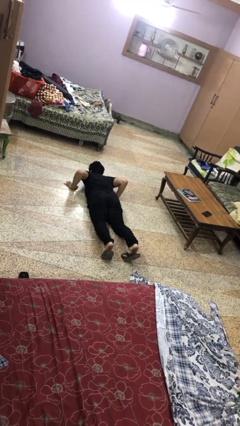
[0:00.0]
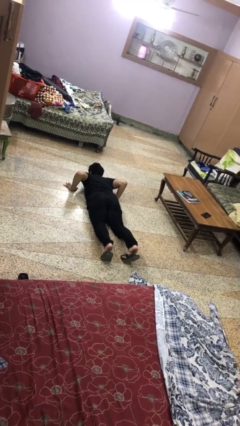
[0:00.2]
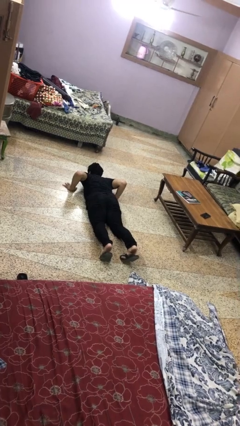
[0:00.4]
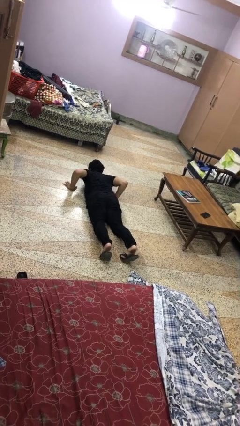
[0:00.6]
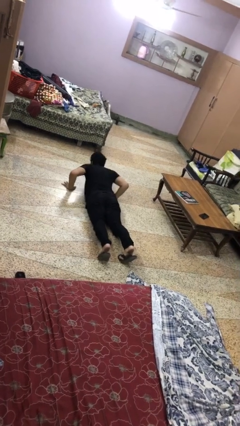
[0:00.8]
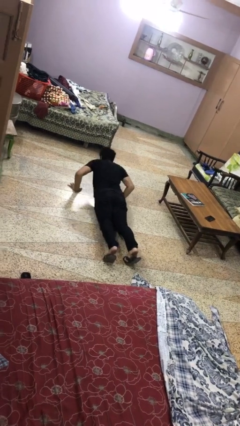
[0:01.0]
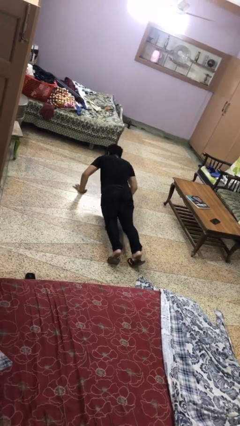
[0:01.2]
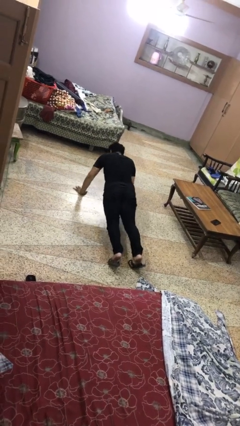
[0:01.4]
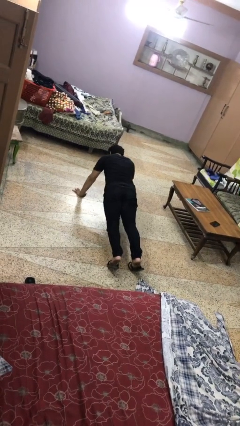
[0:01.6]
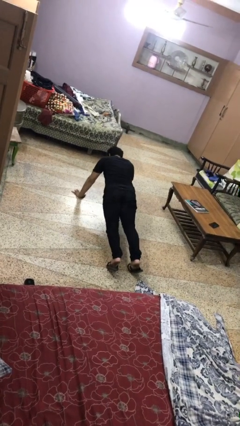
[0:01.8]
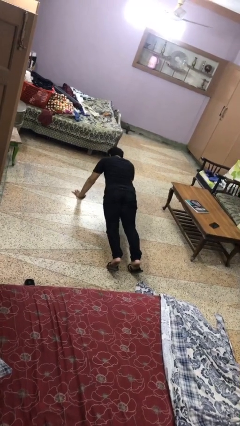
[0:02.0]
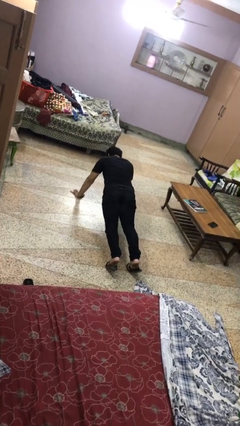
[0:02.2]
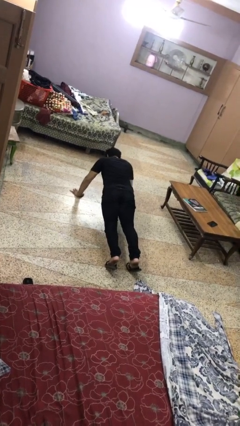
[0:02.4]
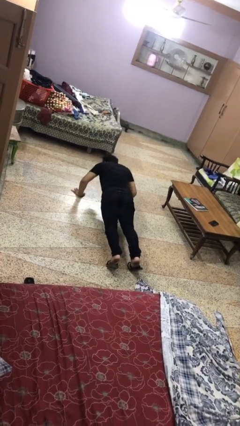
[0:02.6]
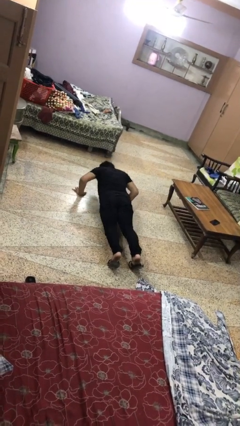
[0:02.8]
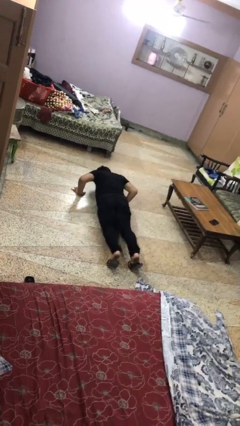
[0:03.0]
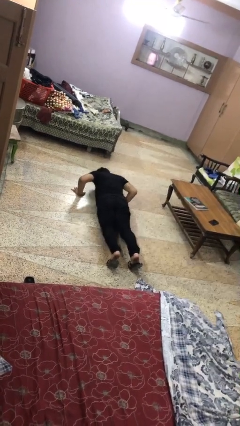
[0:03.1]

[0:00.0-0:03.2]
person exercises with pushup

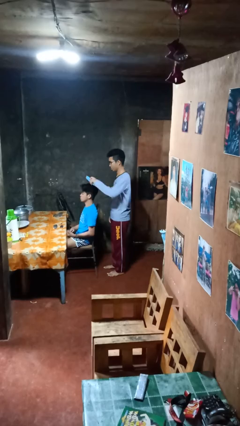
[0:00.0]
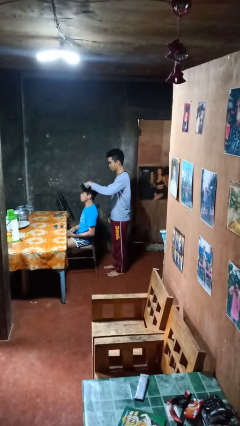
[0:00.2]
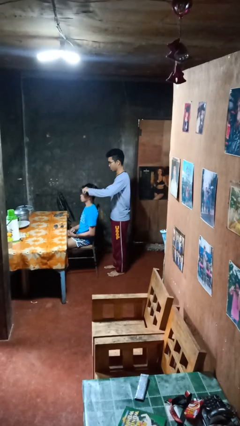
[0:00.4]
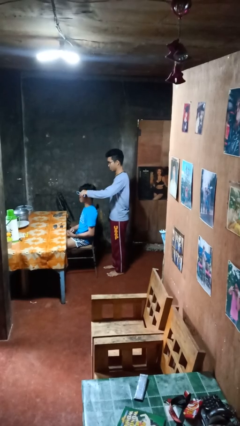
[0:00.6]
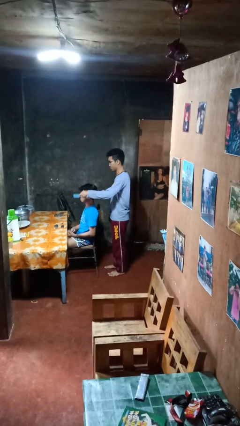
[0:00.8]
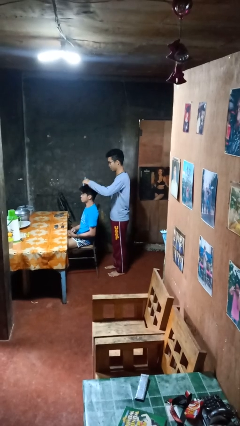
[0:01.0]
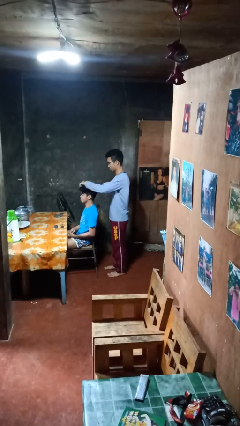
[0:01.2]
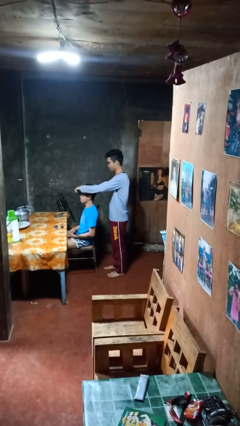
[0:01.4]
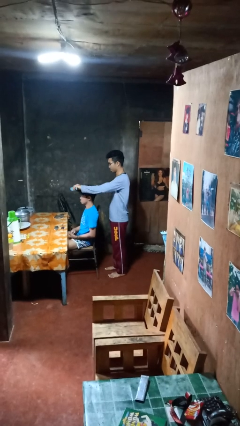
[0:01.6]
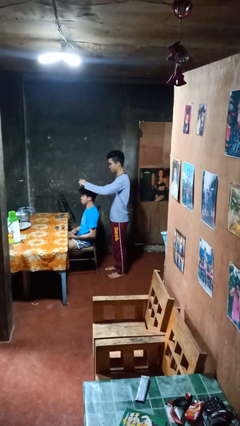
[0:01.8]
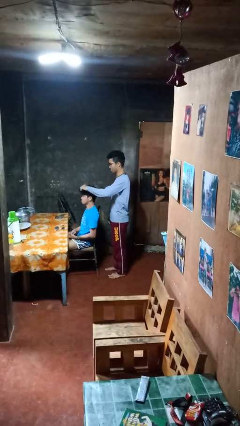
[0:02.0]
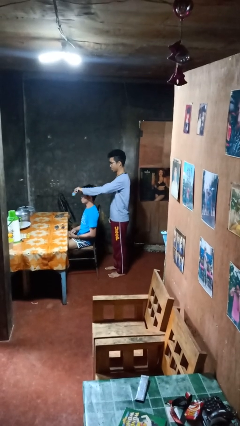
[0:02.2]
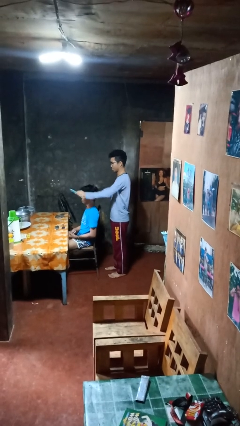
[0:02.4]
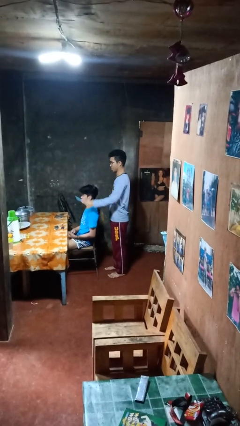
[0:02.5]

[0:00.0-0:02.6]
person brushes hair of person

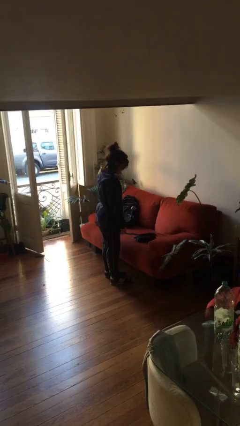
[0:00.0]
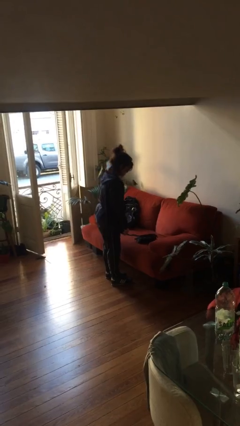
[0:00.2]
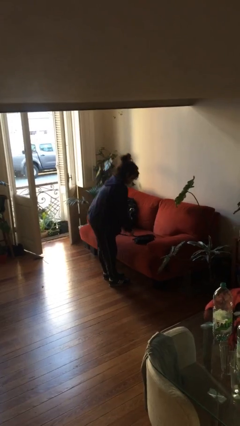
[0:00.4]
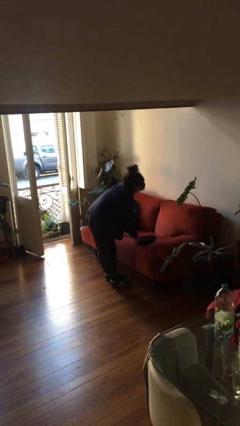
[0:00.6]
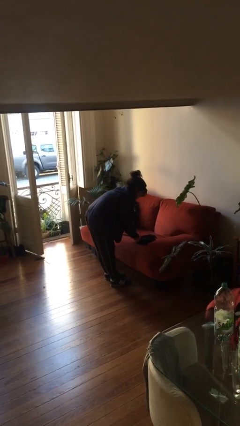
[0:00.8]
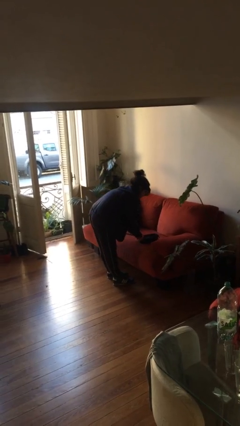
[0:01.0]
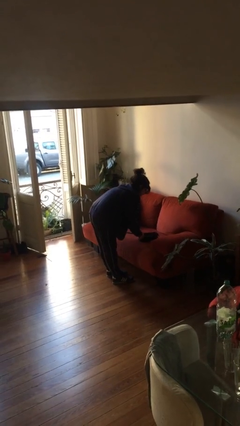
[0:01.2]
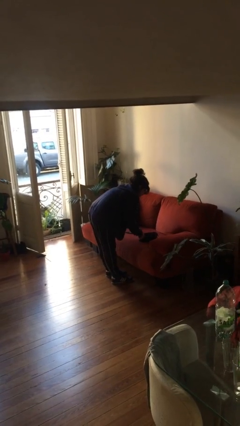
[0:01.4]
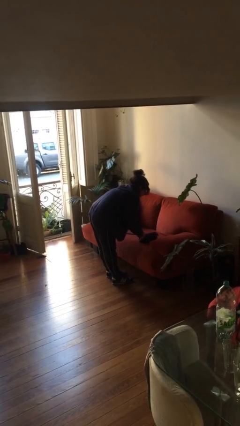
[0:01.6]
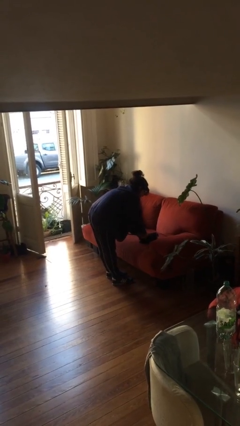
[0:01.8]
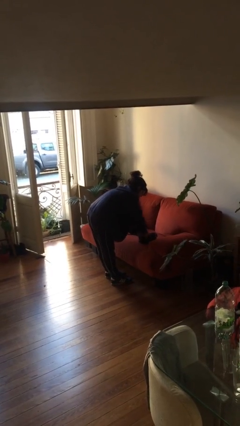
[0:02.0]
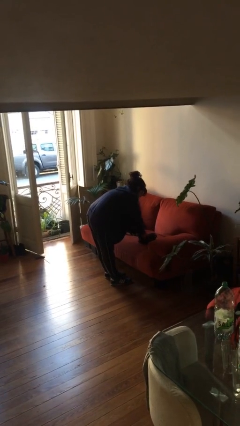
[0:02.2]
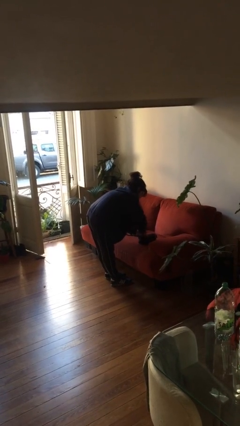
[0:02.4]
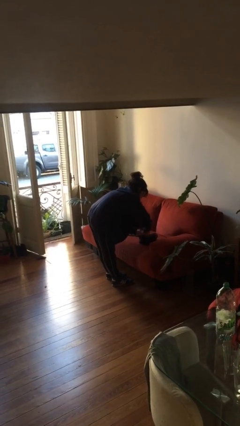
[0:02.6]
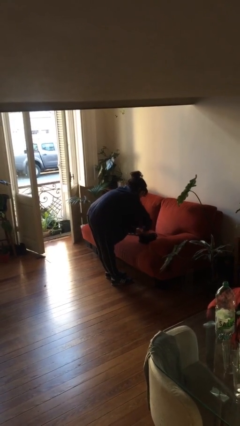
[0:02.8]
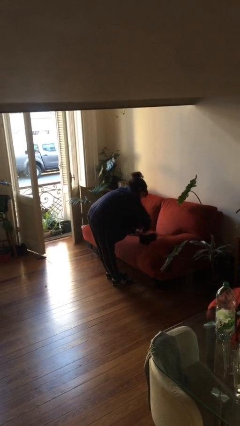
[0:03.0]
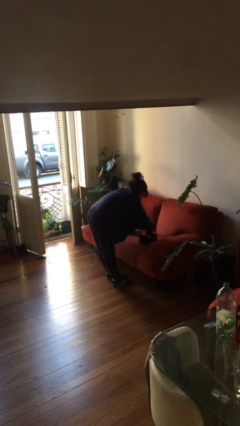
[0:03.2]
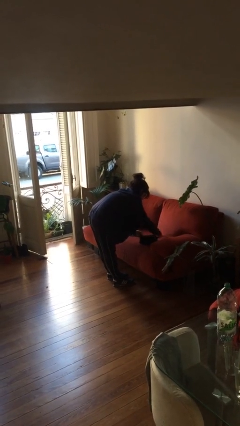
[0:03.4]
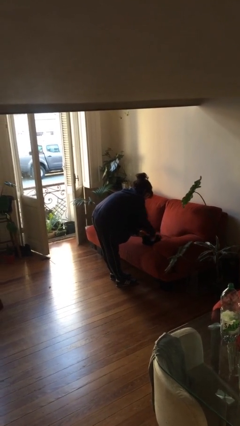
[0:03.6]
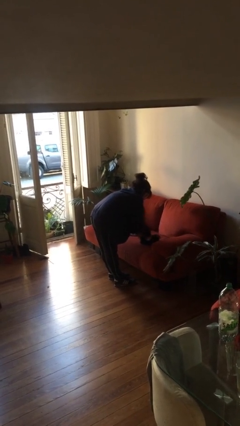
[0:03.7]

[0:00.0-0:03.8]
person searches in purse

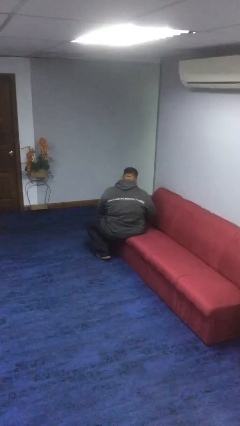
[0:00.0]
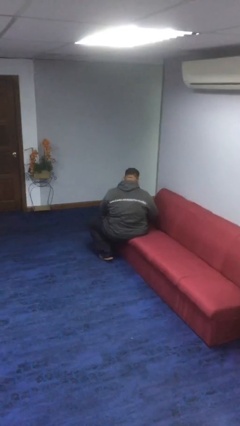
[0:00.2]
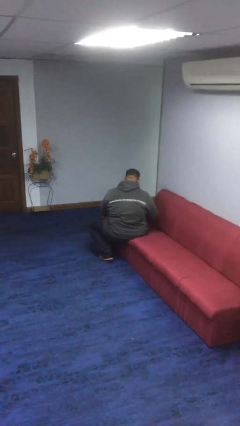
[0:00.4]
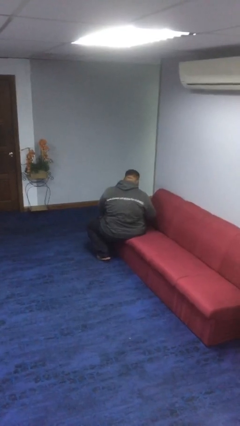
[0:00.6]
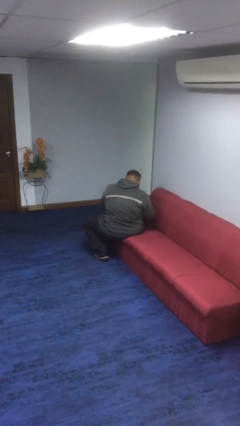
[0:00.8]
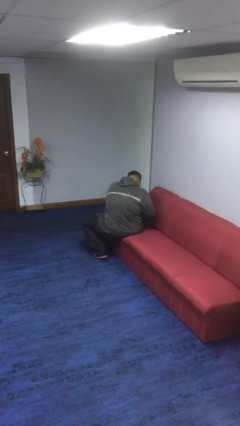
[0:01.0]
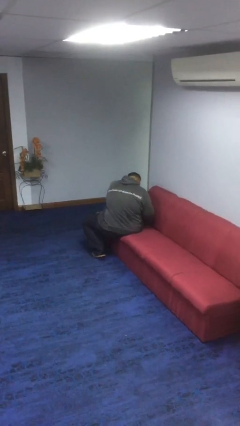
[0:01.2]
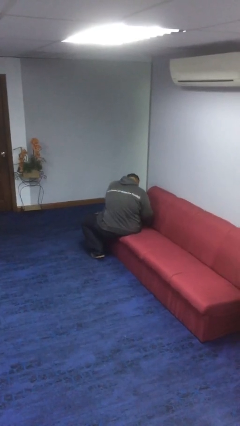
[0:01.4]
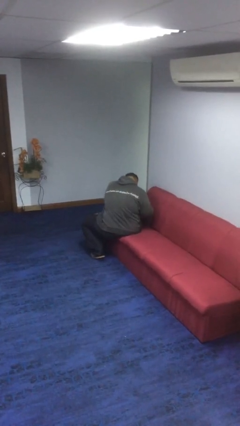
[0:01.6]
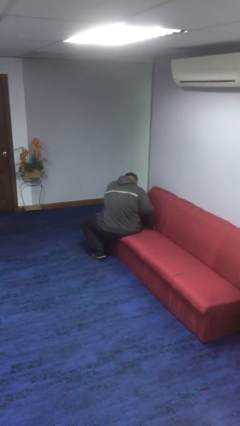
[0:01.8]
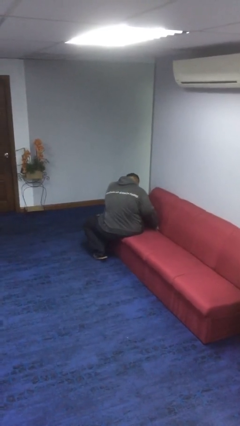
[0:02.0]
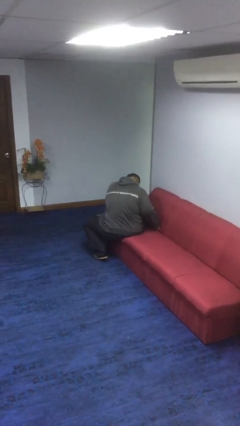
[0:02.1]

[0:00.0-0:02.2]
person searches in couch

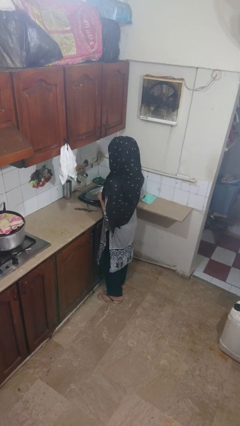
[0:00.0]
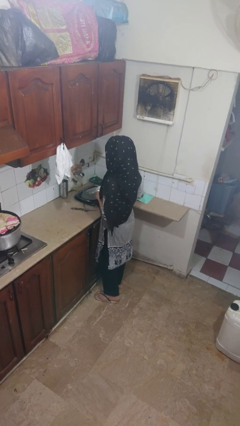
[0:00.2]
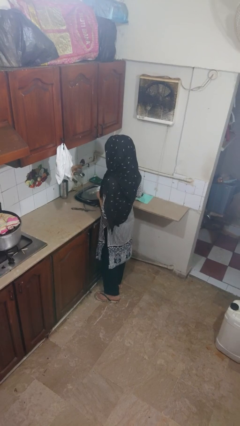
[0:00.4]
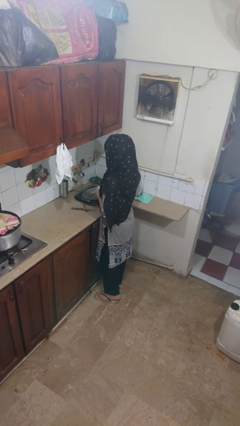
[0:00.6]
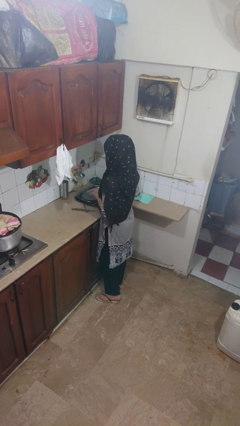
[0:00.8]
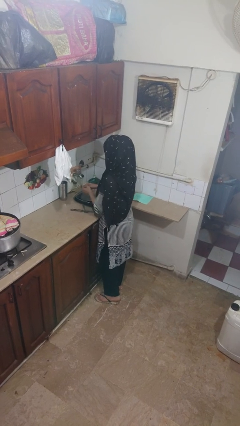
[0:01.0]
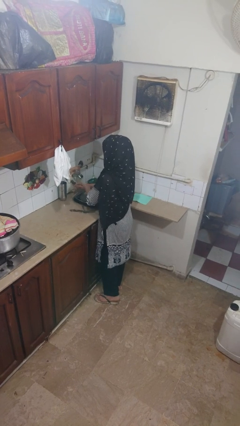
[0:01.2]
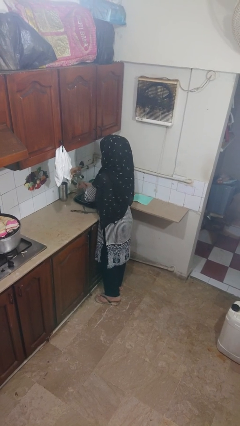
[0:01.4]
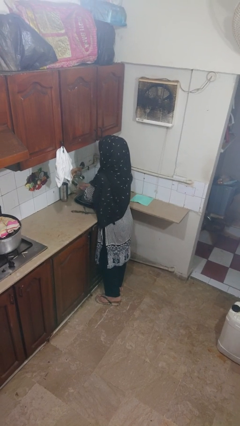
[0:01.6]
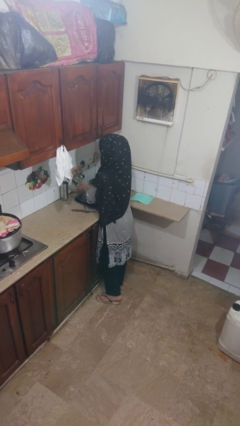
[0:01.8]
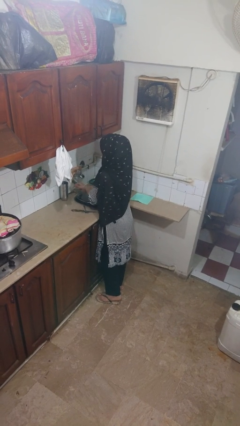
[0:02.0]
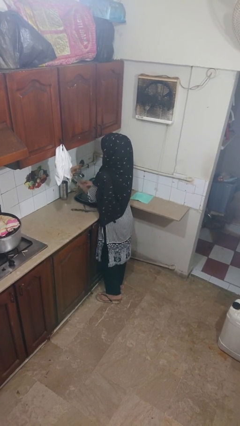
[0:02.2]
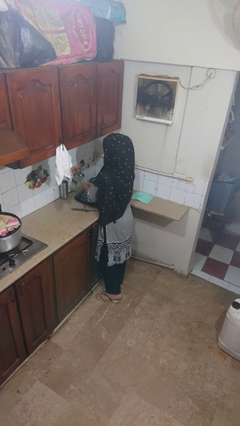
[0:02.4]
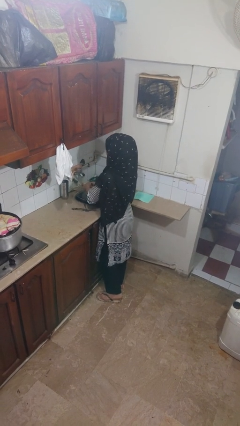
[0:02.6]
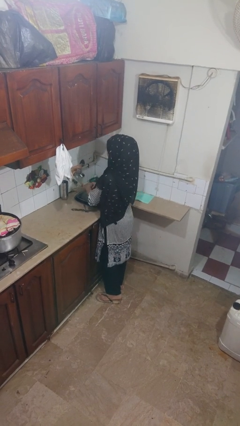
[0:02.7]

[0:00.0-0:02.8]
person washes hands

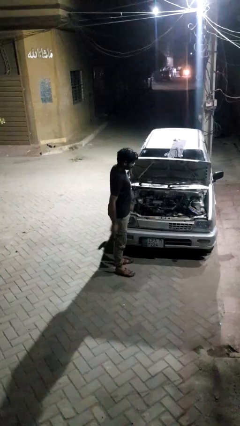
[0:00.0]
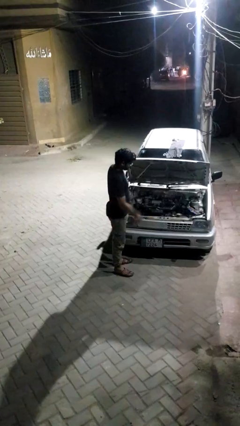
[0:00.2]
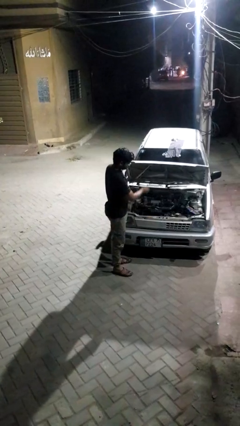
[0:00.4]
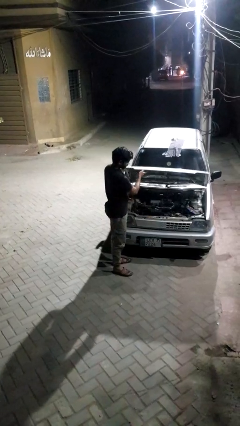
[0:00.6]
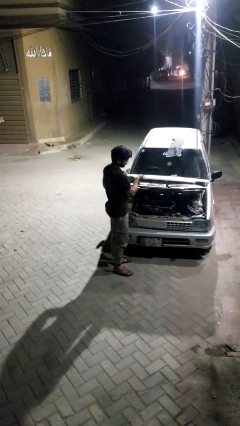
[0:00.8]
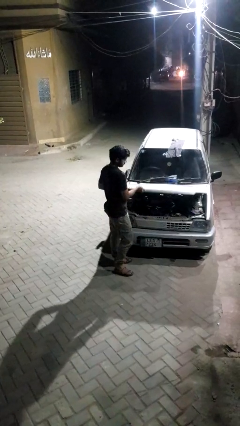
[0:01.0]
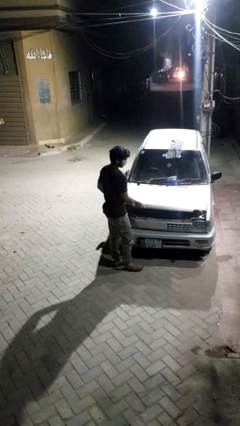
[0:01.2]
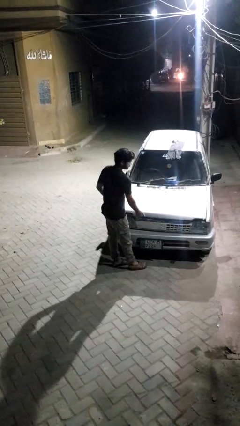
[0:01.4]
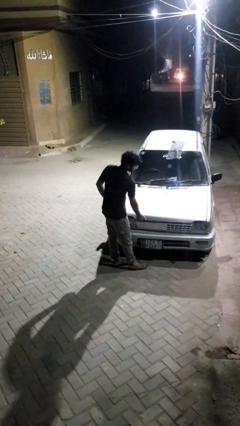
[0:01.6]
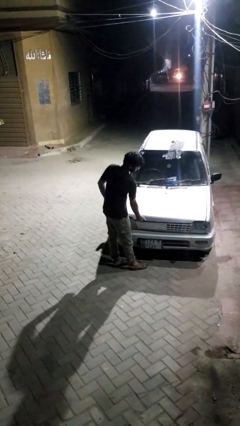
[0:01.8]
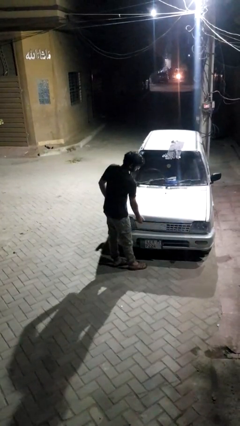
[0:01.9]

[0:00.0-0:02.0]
person closes car hood

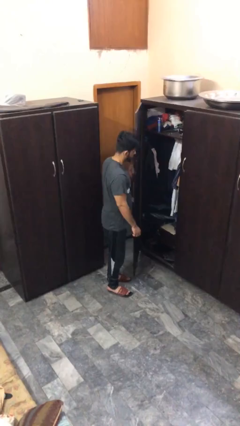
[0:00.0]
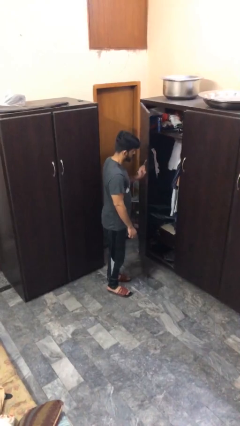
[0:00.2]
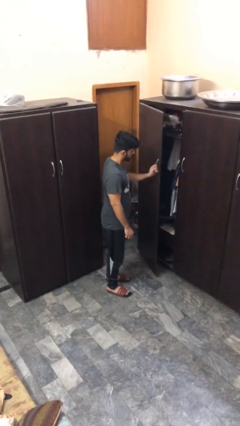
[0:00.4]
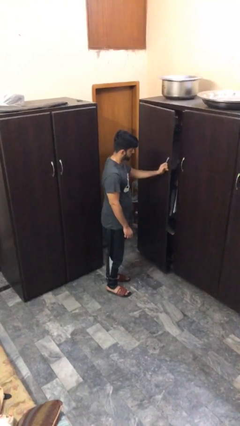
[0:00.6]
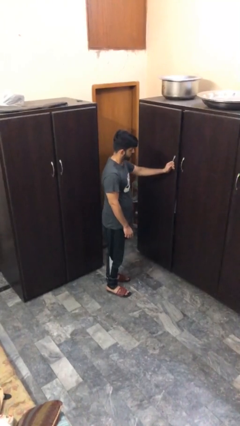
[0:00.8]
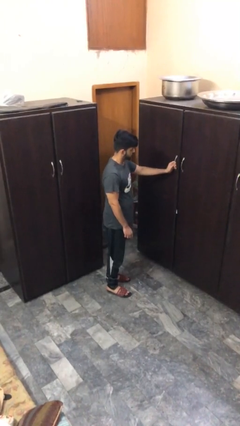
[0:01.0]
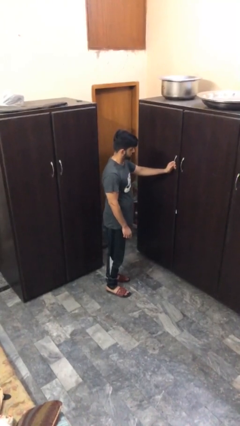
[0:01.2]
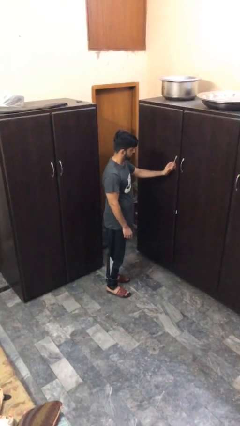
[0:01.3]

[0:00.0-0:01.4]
person closes dresser drawer
